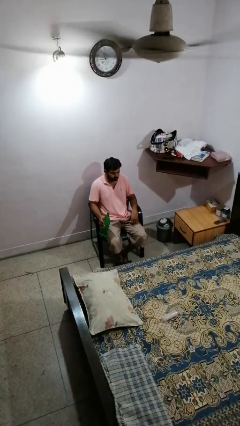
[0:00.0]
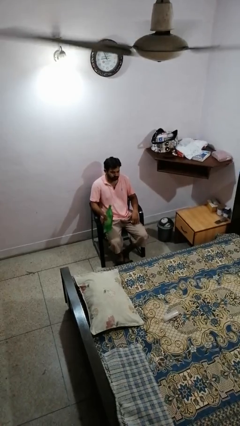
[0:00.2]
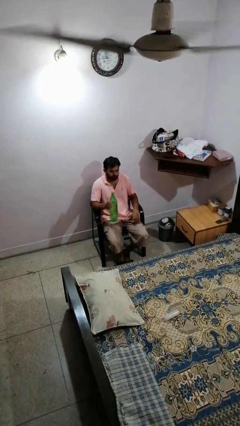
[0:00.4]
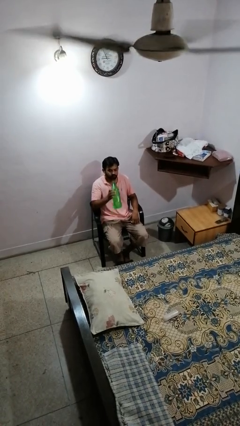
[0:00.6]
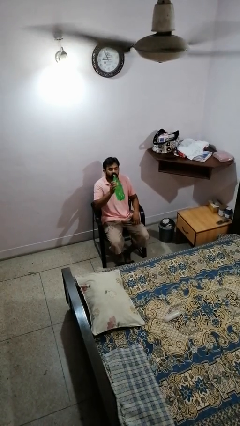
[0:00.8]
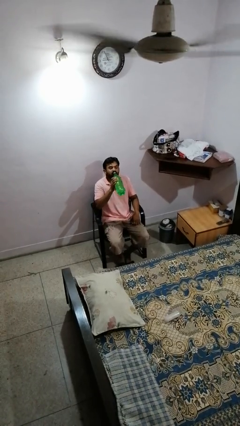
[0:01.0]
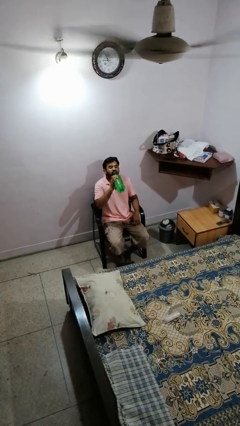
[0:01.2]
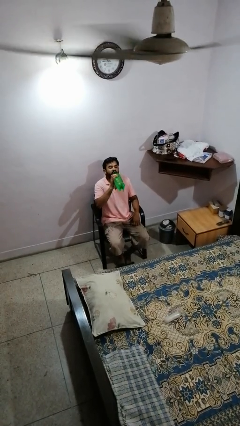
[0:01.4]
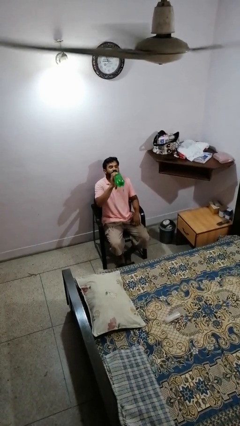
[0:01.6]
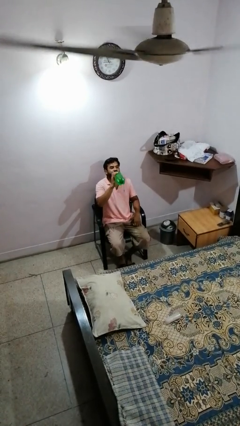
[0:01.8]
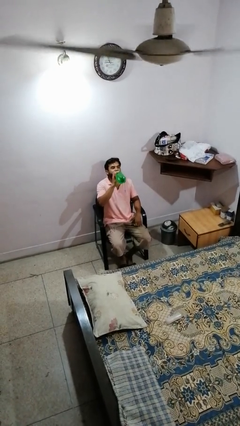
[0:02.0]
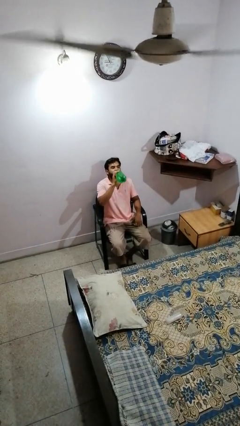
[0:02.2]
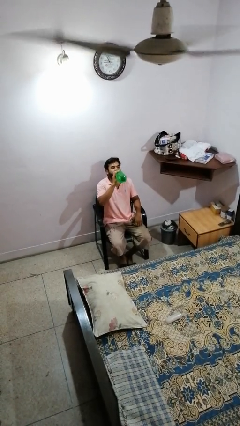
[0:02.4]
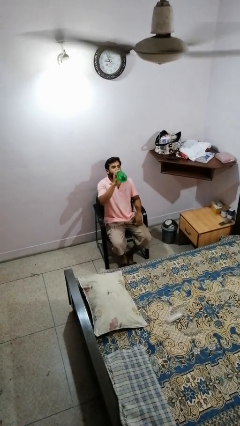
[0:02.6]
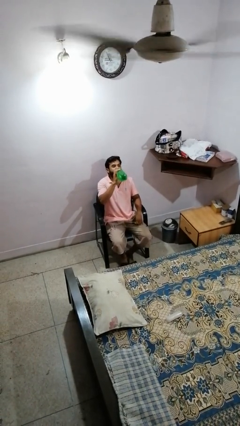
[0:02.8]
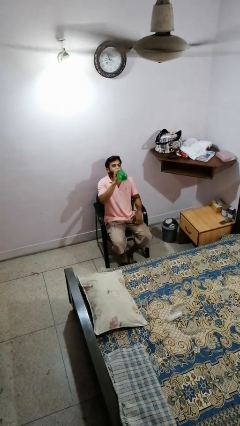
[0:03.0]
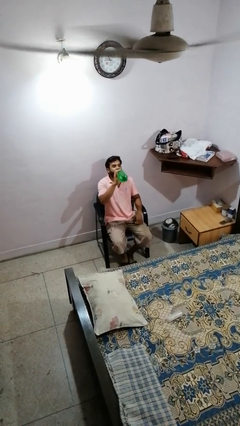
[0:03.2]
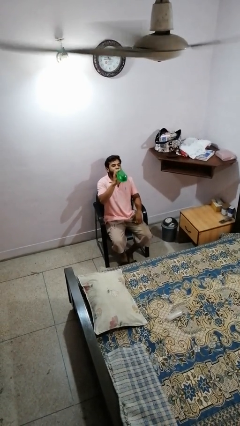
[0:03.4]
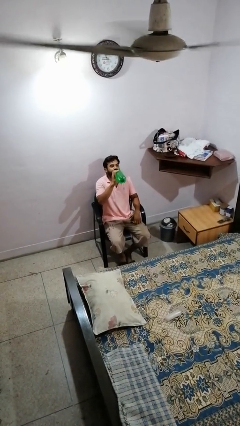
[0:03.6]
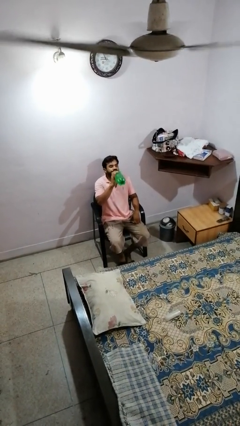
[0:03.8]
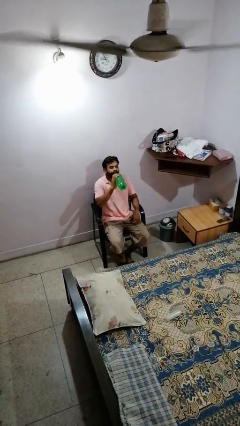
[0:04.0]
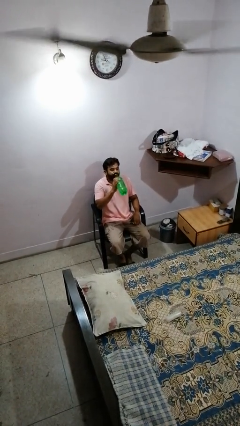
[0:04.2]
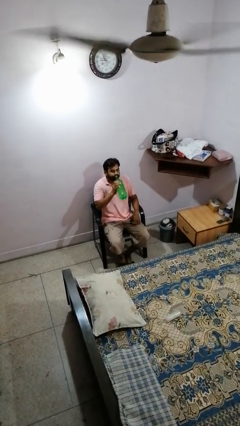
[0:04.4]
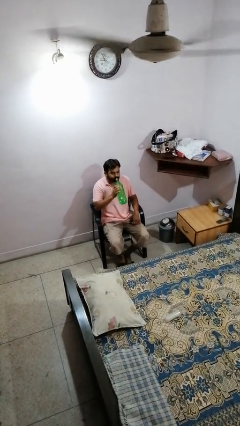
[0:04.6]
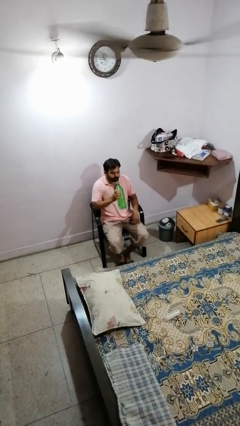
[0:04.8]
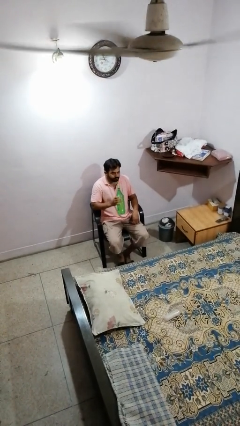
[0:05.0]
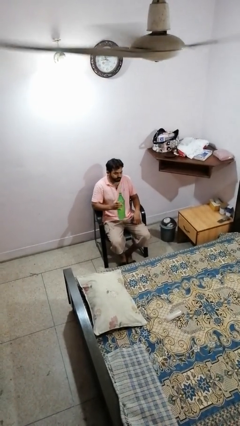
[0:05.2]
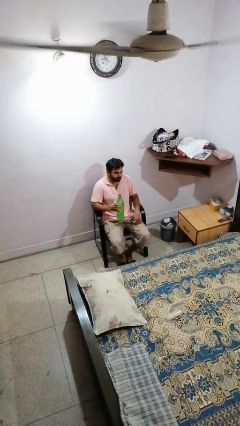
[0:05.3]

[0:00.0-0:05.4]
person drinks from bottle

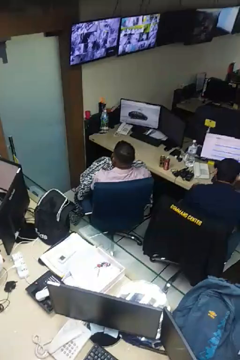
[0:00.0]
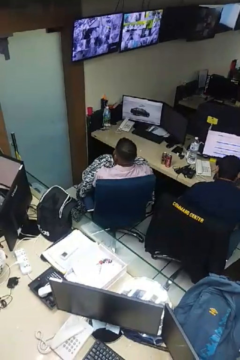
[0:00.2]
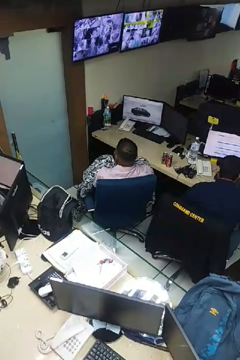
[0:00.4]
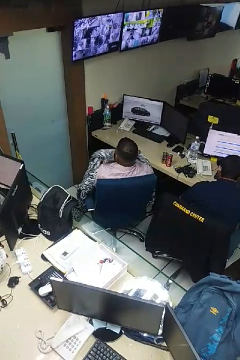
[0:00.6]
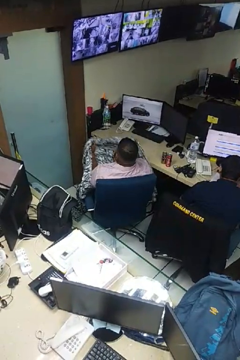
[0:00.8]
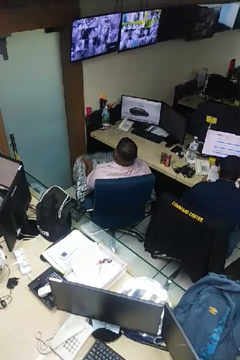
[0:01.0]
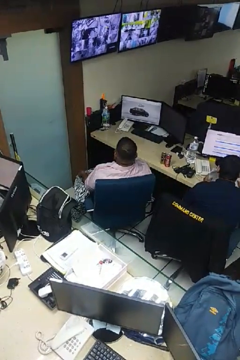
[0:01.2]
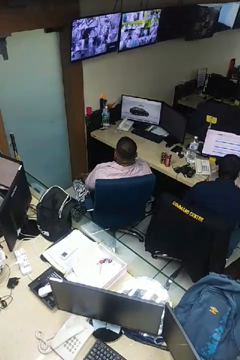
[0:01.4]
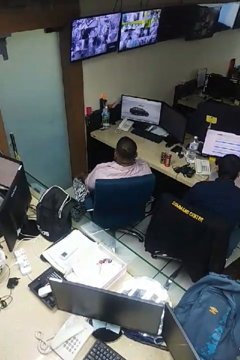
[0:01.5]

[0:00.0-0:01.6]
person uncovers with blanket

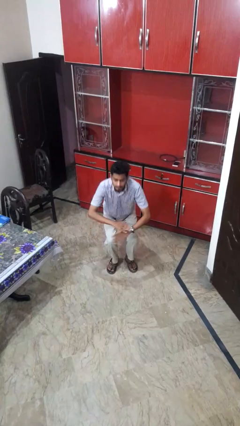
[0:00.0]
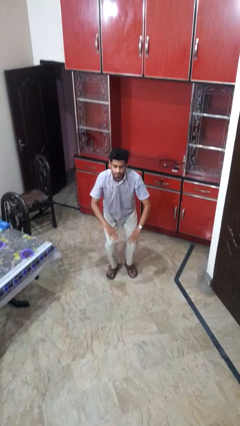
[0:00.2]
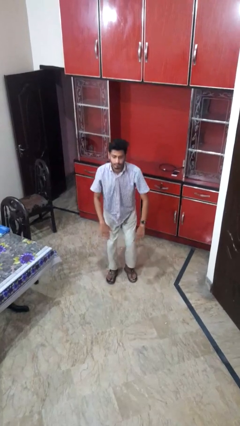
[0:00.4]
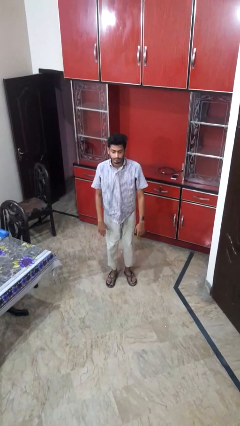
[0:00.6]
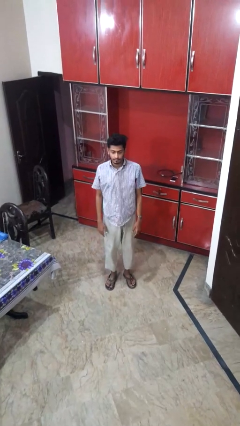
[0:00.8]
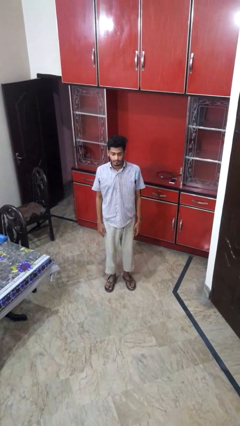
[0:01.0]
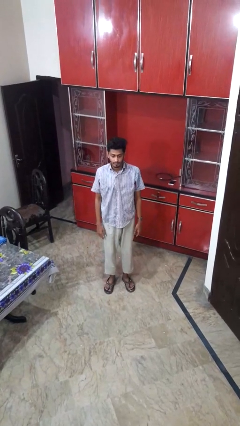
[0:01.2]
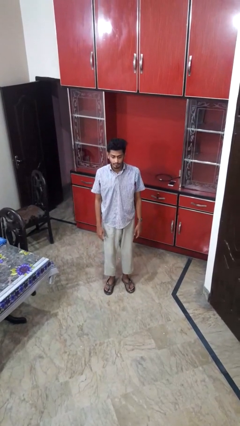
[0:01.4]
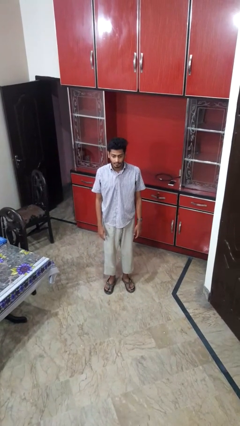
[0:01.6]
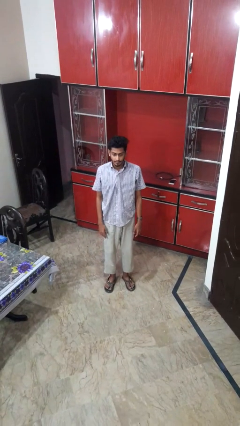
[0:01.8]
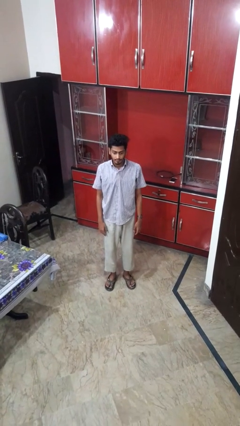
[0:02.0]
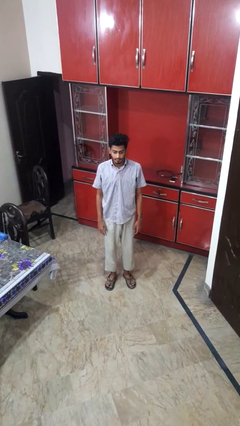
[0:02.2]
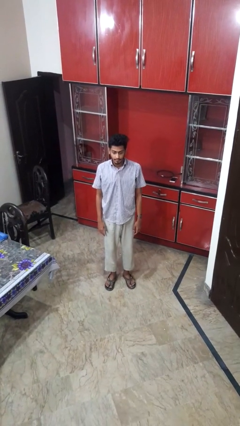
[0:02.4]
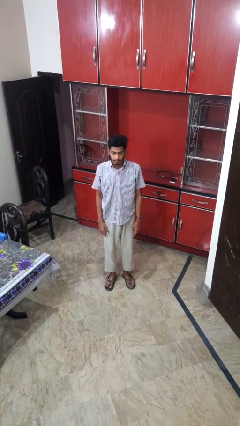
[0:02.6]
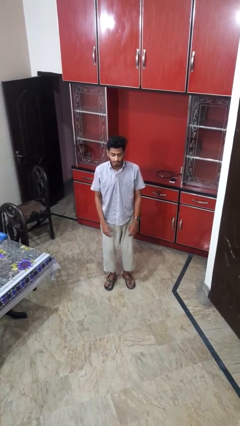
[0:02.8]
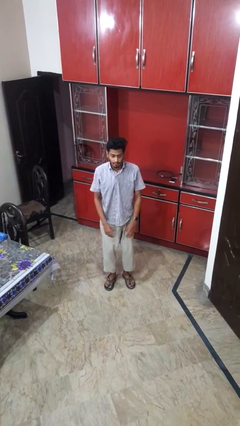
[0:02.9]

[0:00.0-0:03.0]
person stands up

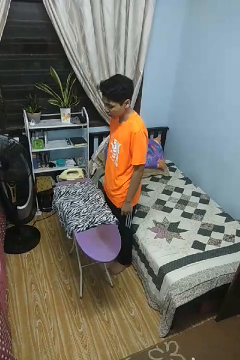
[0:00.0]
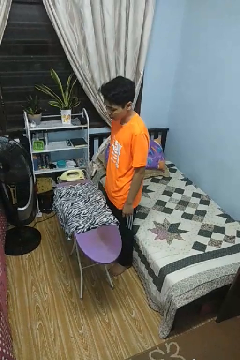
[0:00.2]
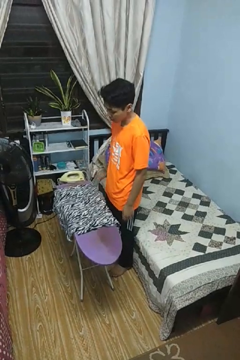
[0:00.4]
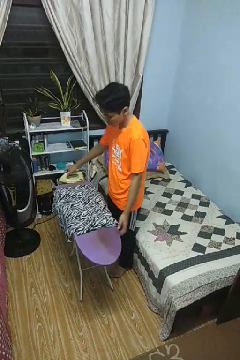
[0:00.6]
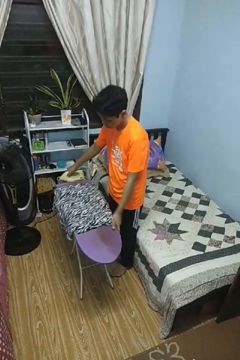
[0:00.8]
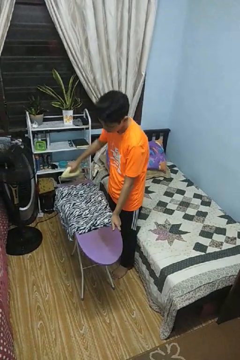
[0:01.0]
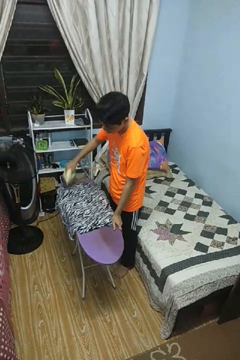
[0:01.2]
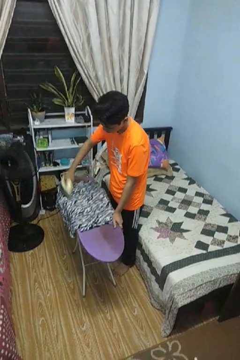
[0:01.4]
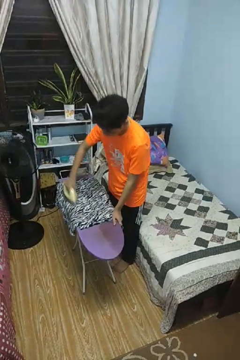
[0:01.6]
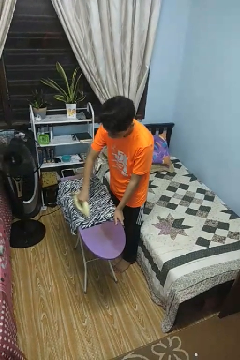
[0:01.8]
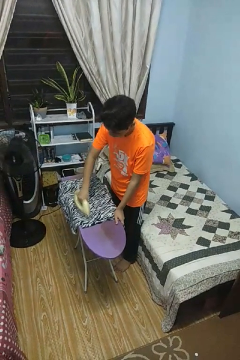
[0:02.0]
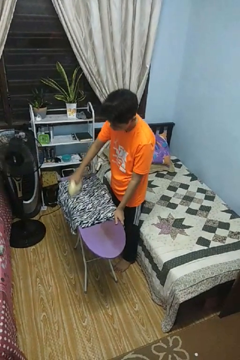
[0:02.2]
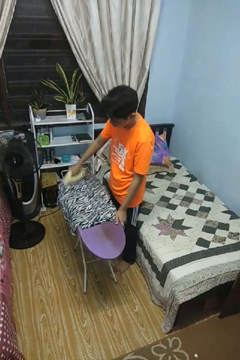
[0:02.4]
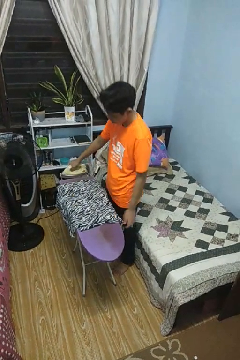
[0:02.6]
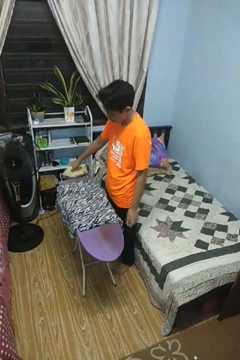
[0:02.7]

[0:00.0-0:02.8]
person irons clothes

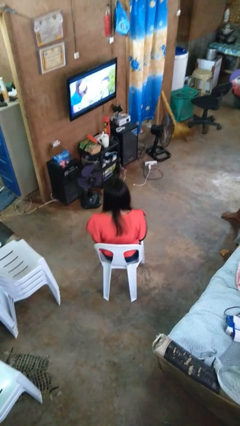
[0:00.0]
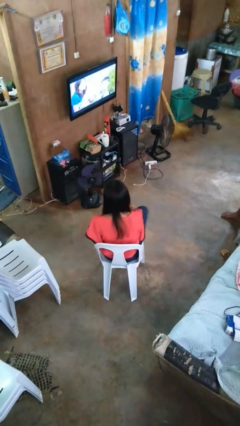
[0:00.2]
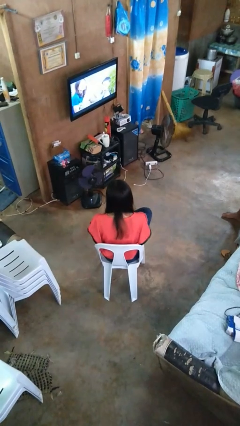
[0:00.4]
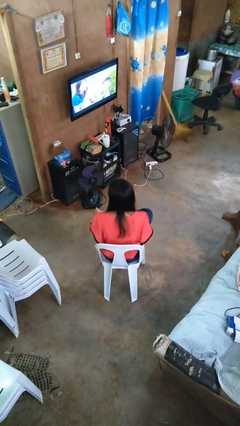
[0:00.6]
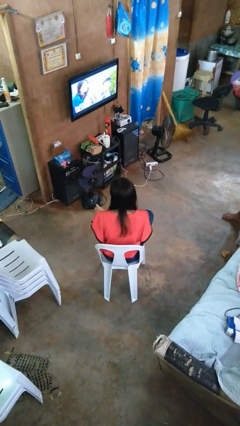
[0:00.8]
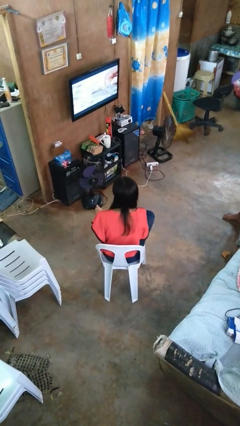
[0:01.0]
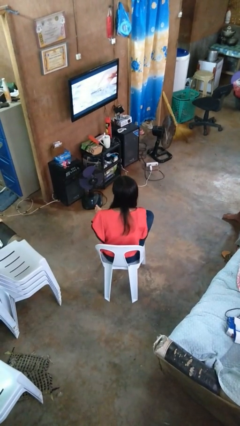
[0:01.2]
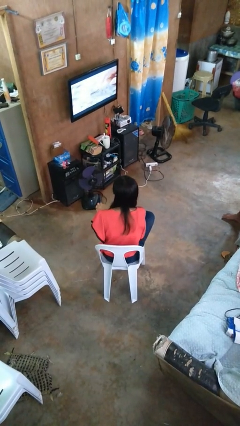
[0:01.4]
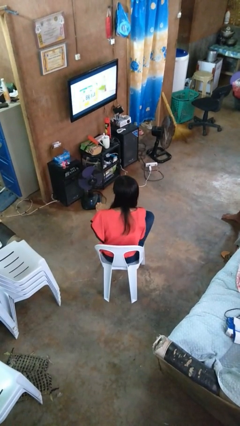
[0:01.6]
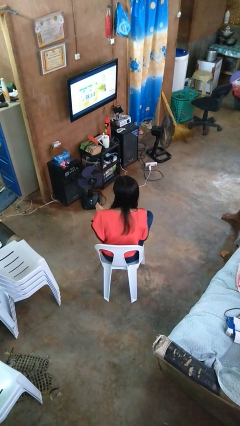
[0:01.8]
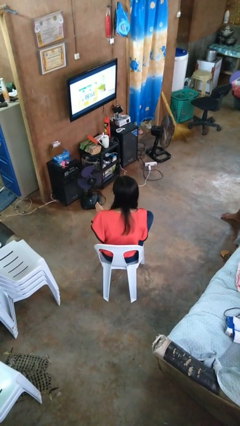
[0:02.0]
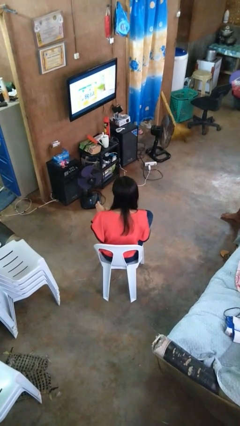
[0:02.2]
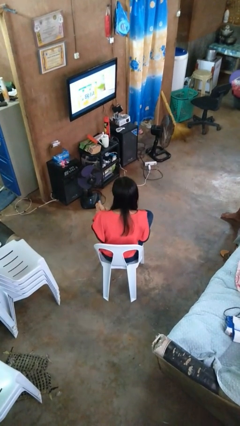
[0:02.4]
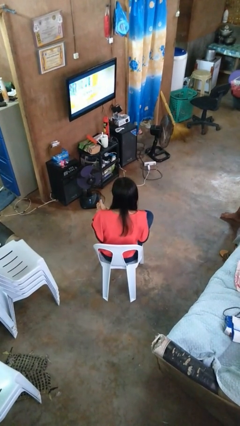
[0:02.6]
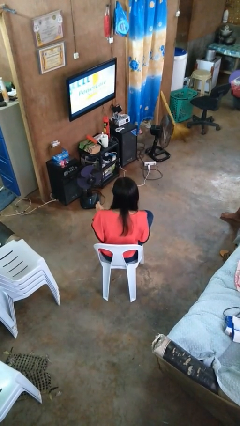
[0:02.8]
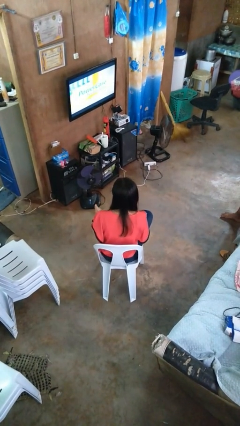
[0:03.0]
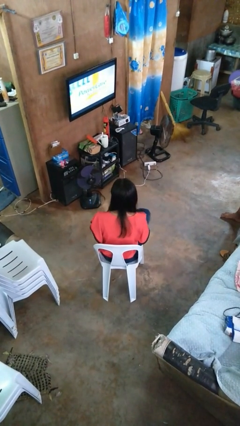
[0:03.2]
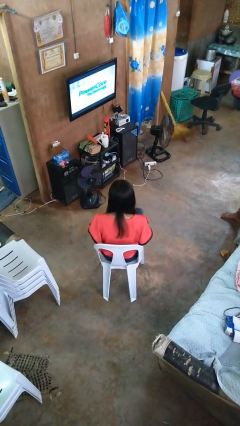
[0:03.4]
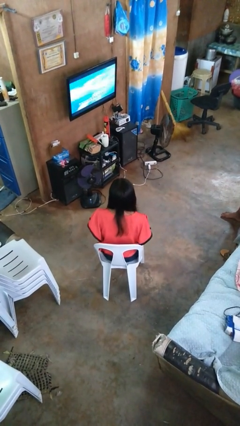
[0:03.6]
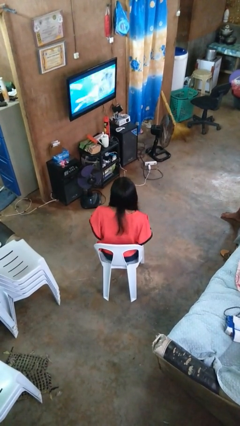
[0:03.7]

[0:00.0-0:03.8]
person rubs foot

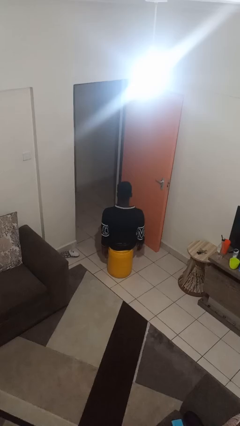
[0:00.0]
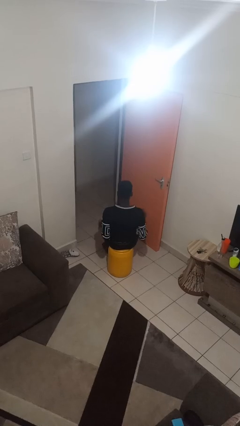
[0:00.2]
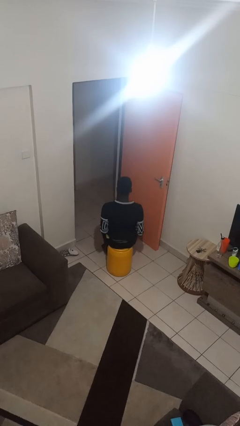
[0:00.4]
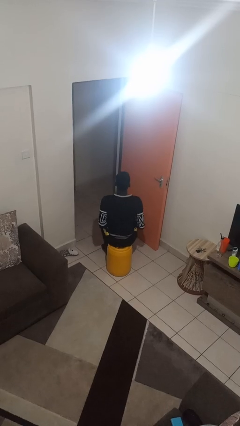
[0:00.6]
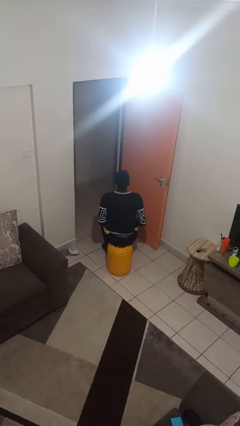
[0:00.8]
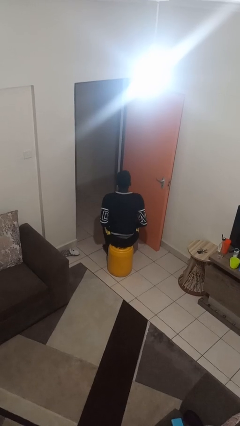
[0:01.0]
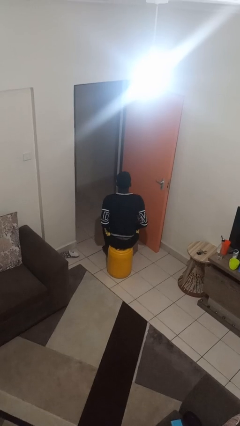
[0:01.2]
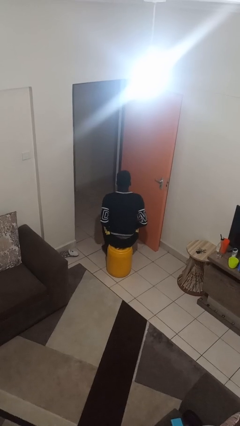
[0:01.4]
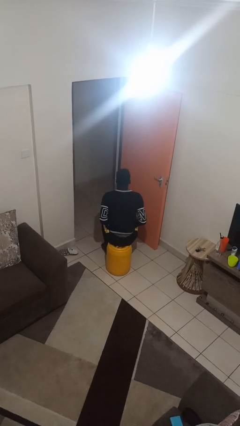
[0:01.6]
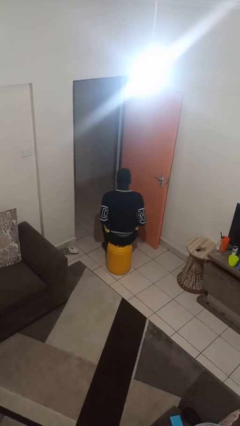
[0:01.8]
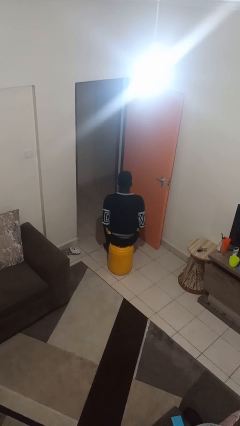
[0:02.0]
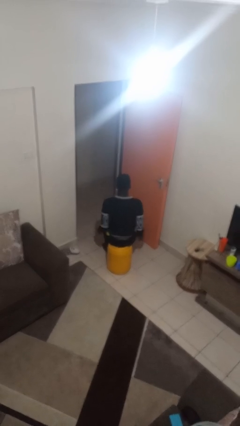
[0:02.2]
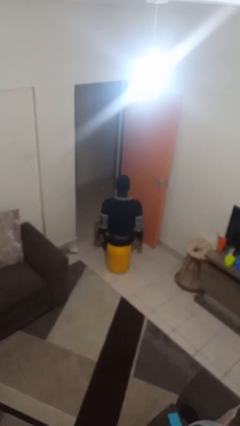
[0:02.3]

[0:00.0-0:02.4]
person slaps hands on thighs
